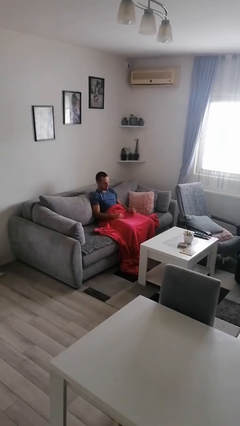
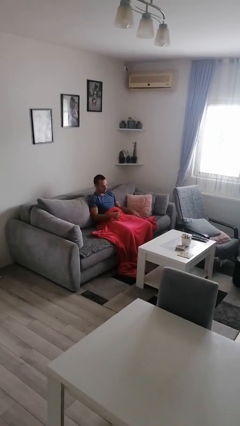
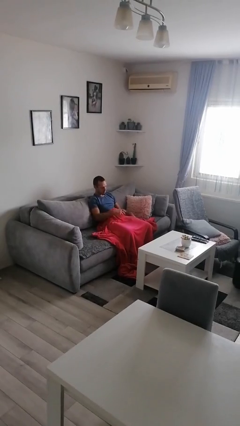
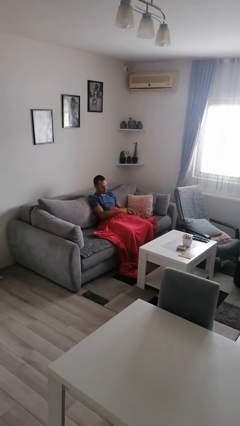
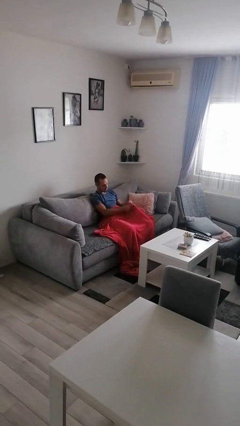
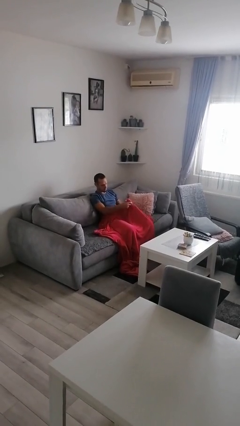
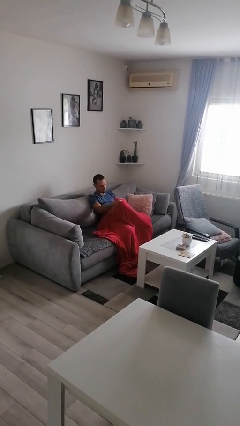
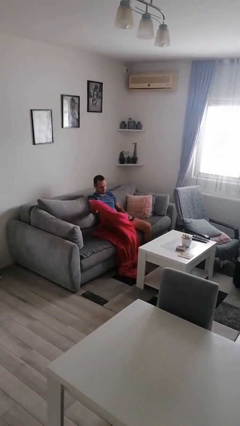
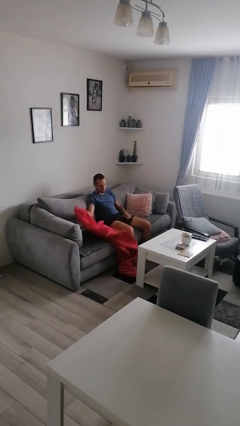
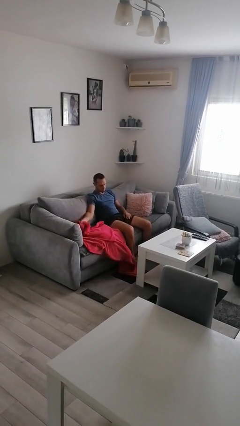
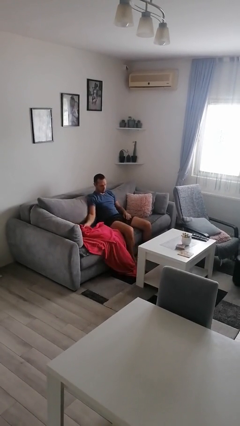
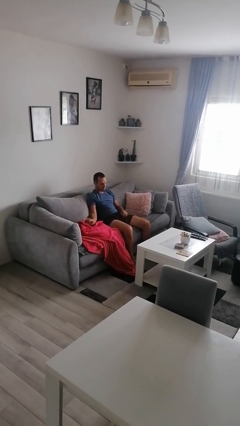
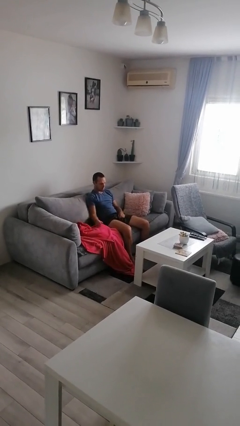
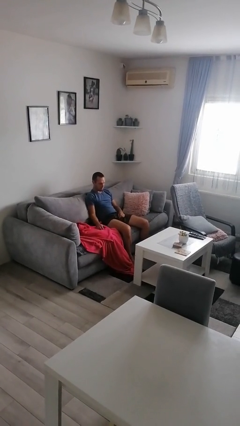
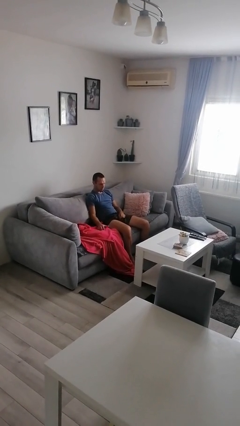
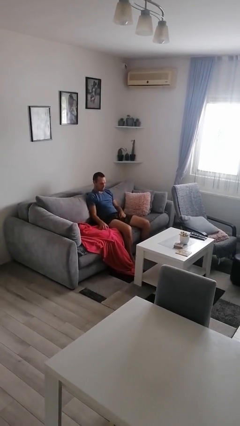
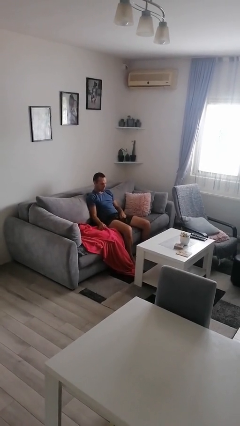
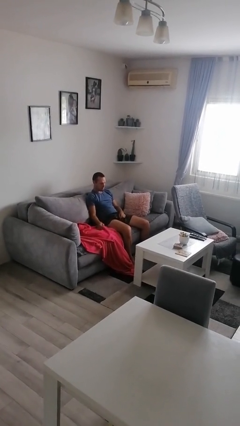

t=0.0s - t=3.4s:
person uncovers with blanket

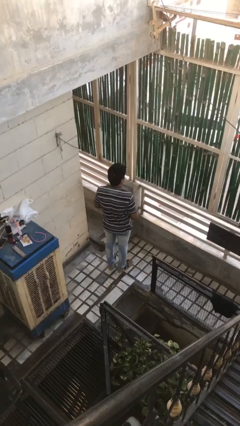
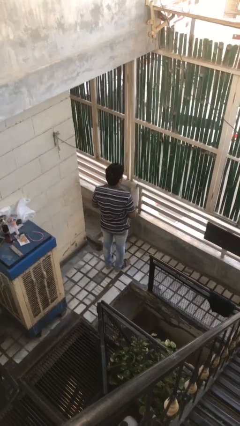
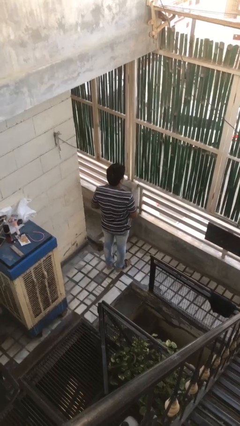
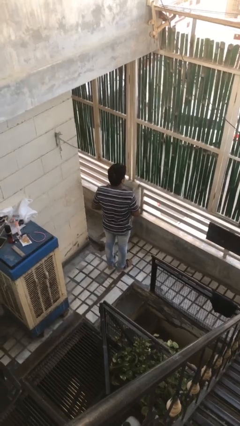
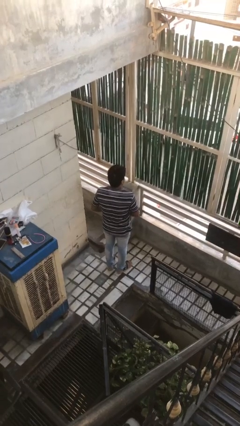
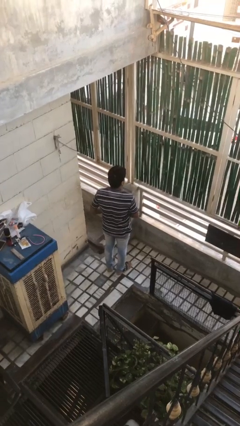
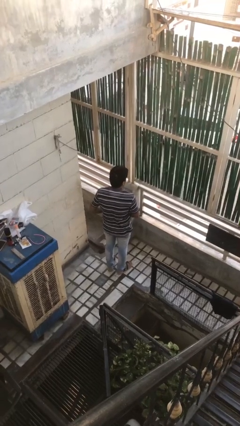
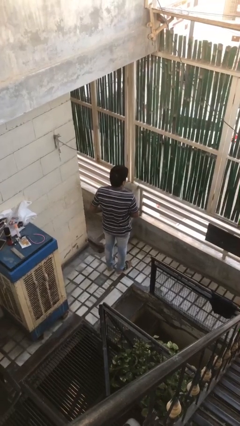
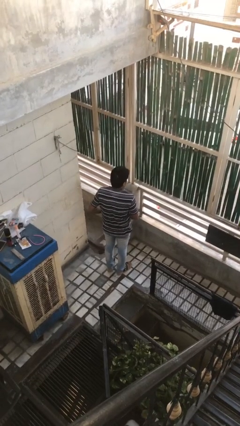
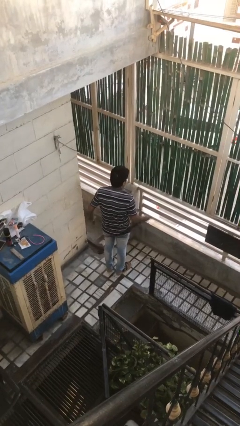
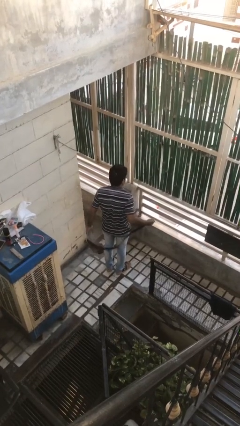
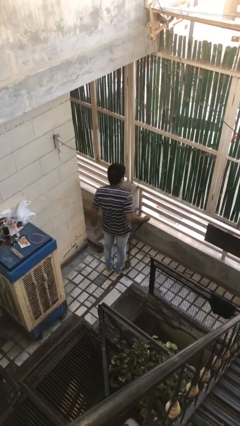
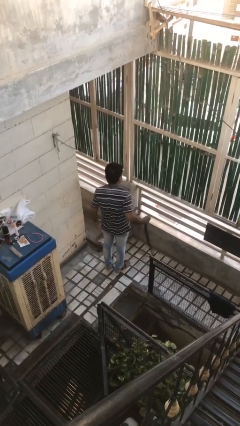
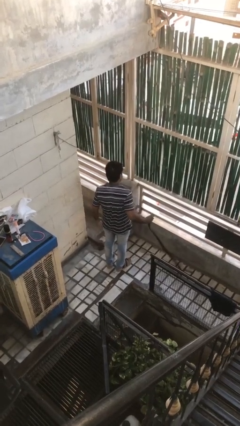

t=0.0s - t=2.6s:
person takes off belt

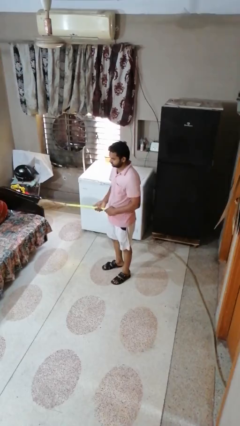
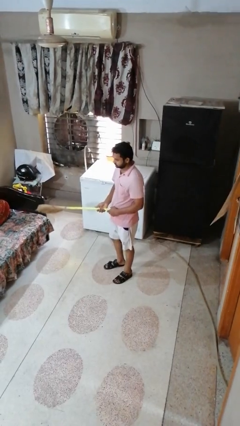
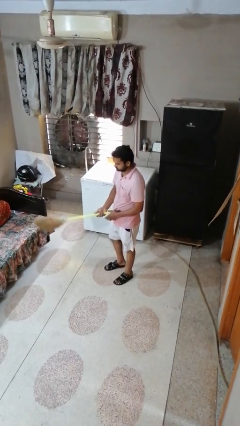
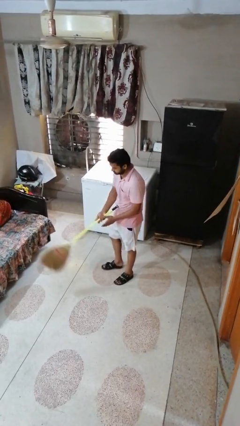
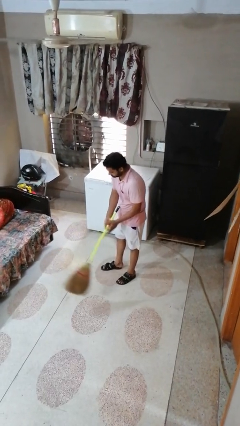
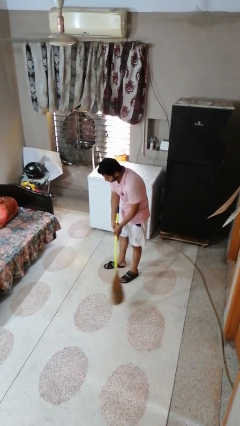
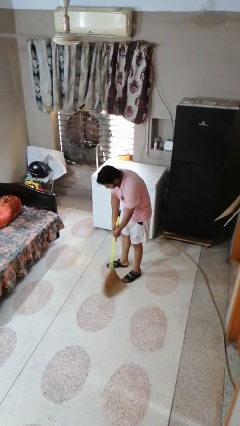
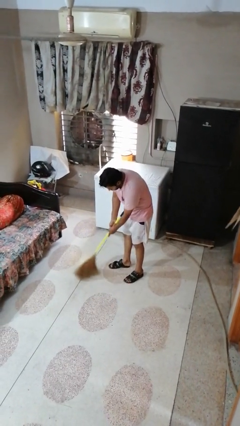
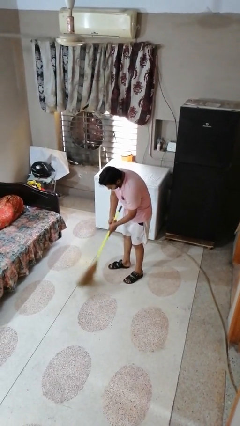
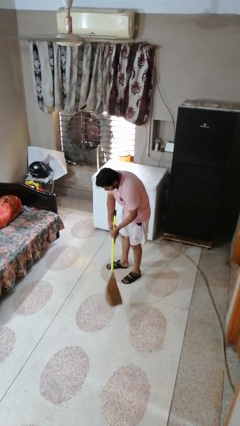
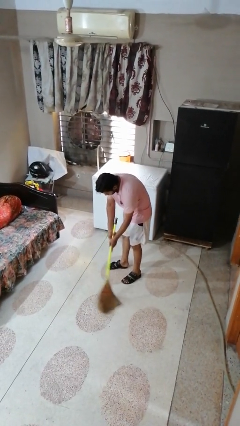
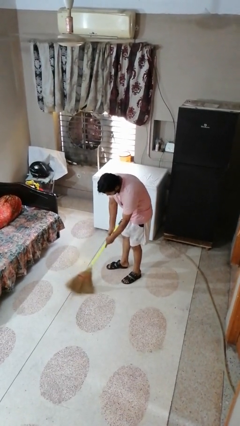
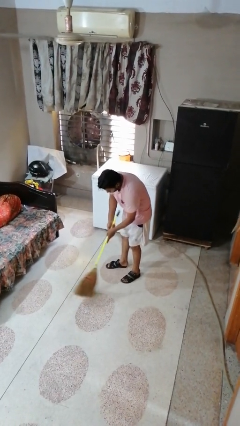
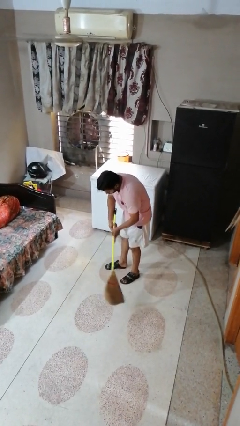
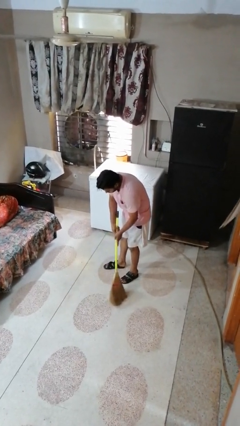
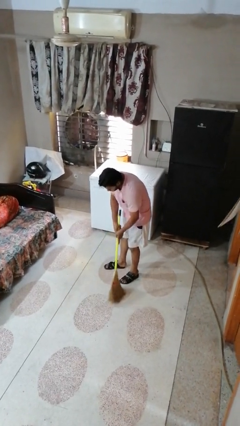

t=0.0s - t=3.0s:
person sweeps floor

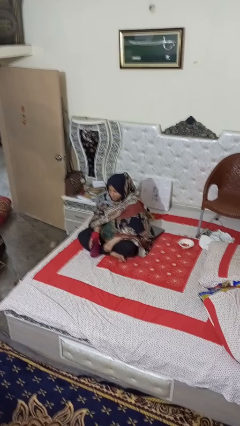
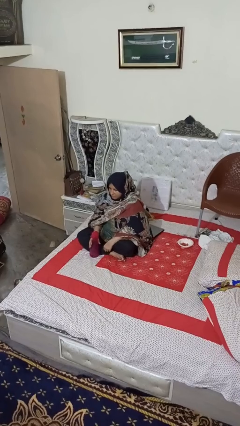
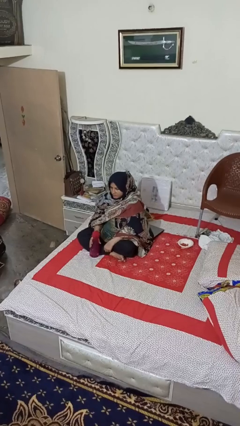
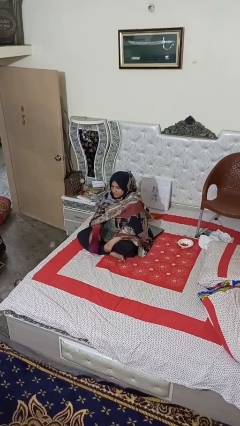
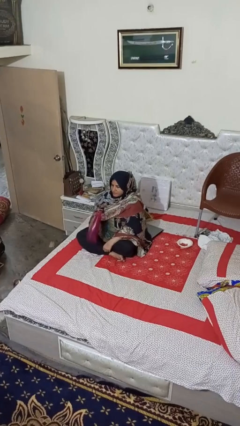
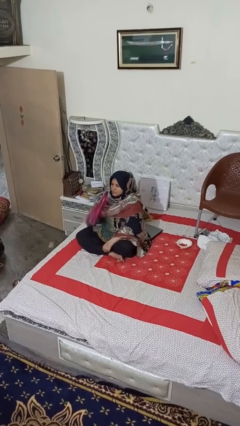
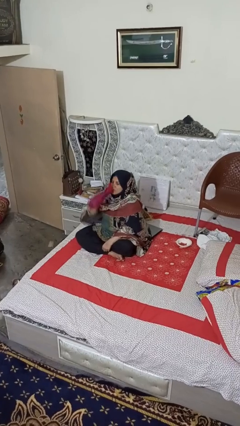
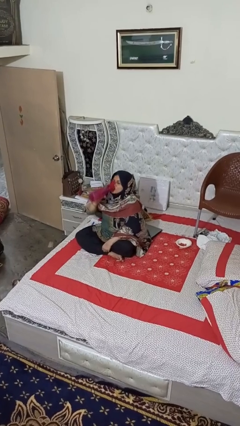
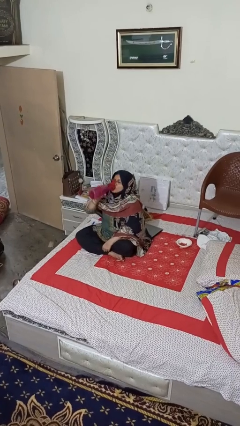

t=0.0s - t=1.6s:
person drinks from bottle

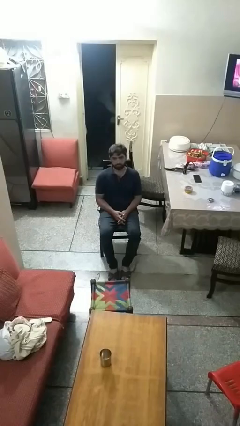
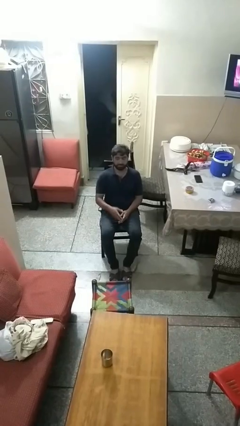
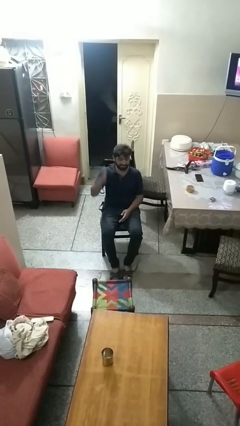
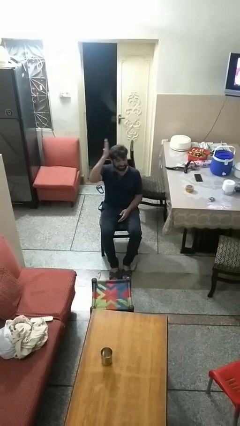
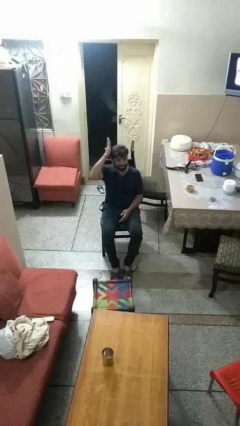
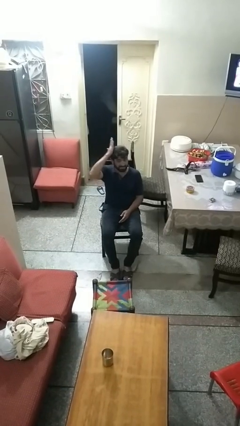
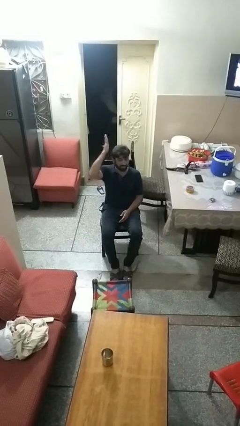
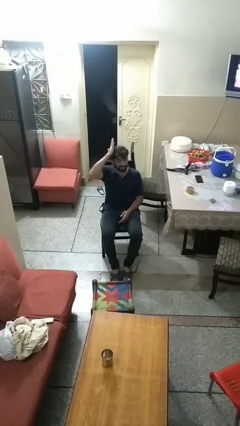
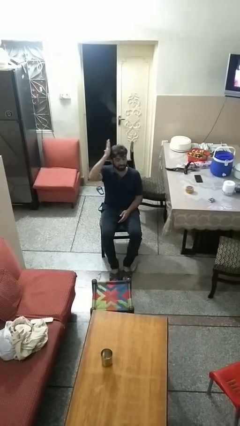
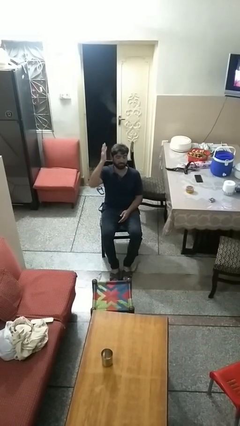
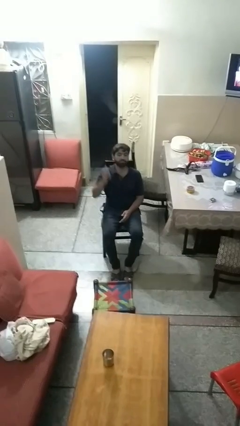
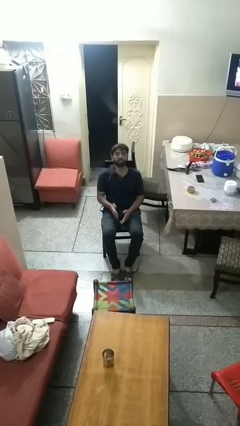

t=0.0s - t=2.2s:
person pats head

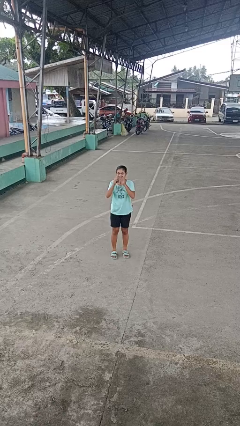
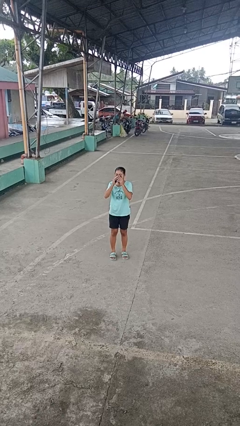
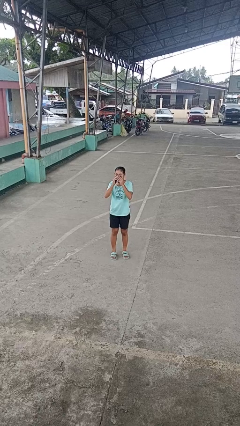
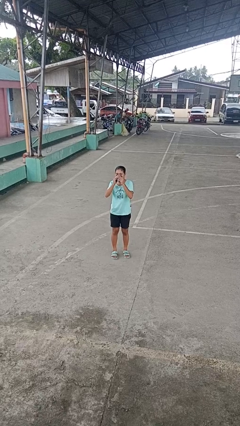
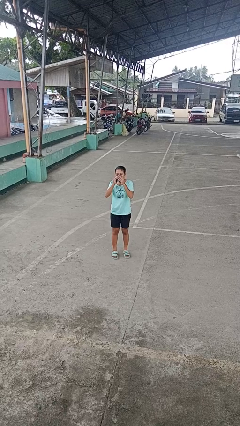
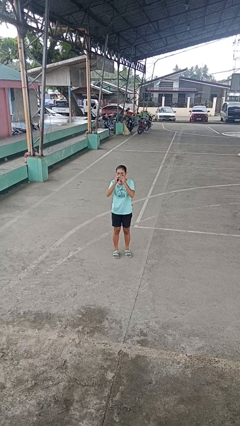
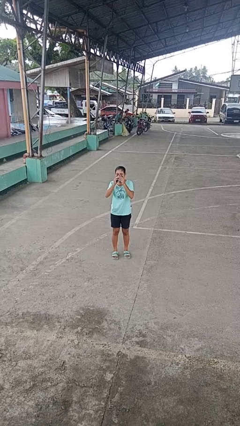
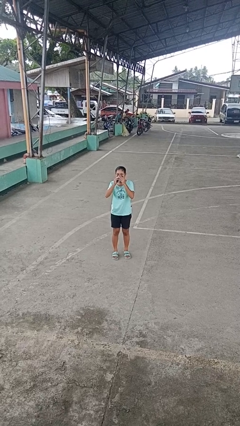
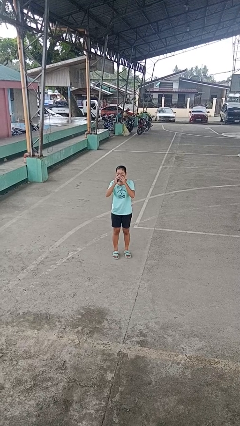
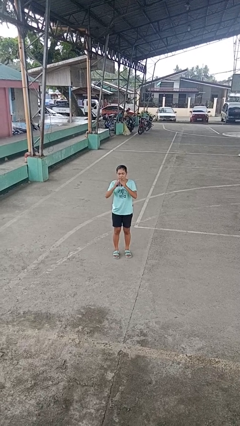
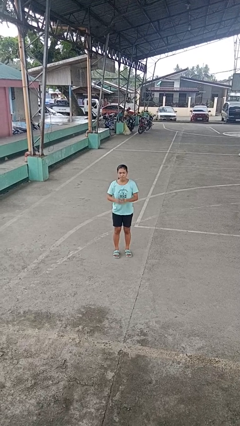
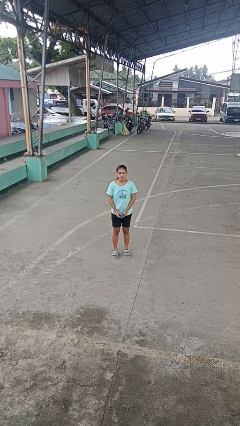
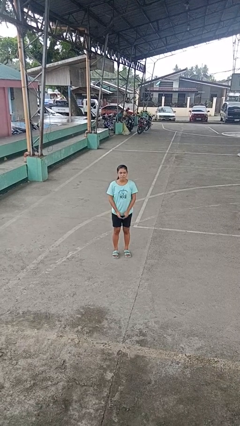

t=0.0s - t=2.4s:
person blows nose

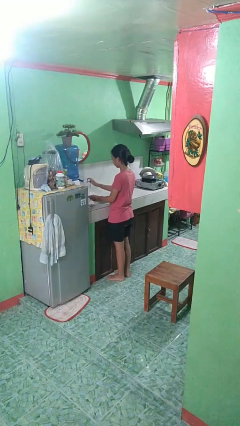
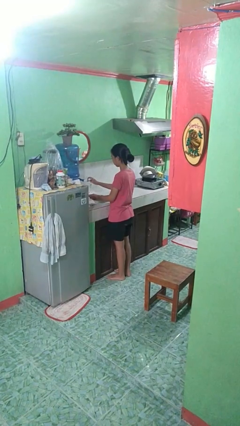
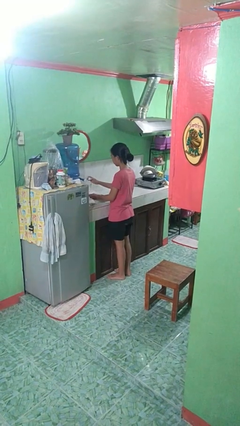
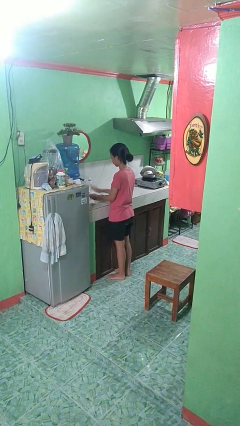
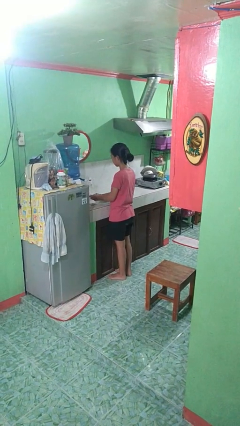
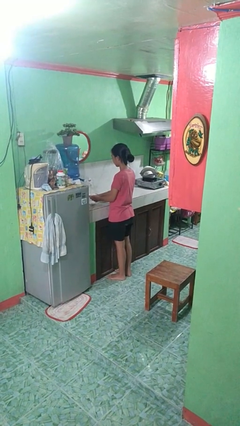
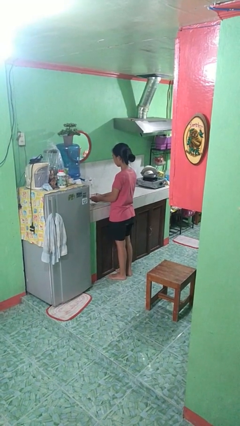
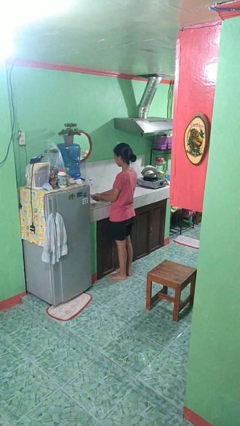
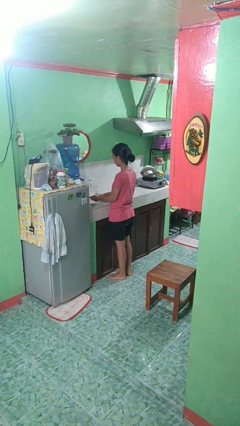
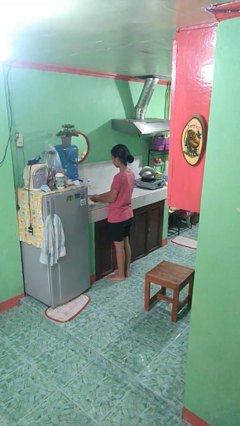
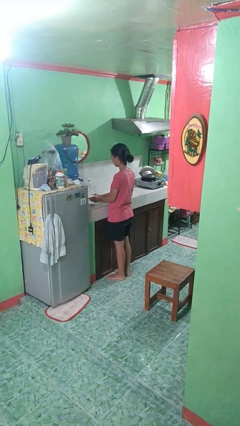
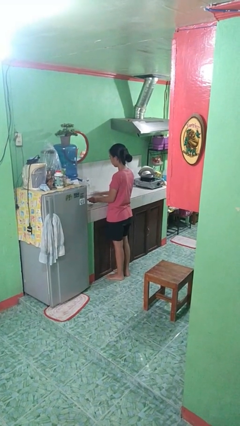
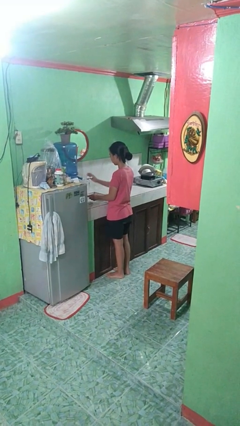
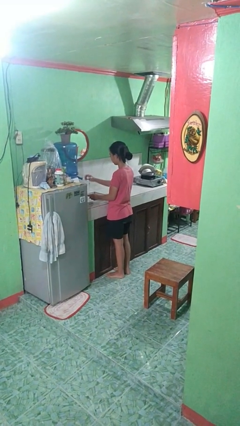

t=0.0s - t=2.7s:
person washes dish
